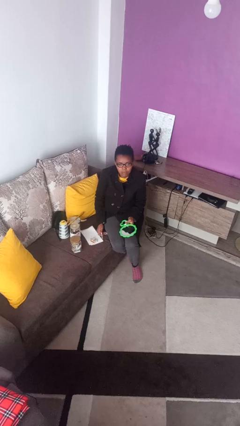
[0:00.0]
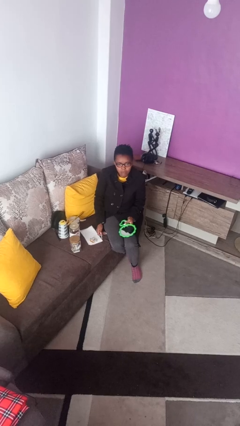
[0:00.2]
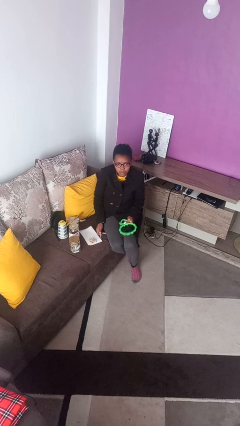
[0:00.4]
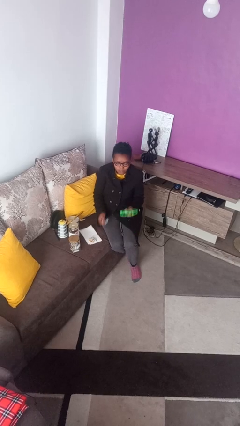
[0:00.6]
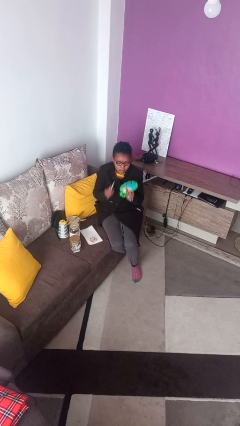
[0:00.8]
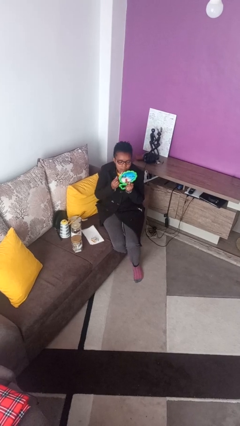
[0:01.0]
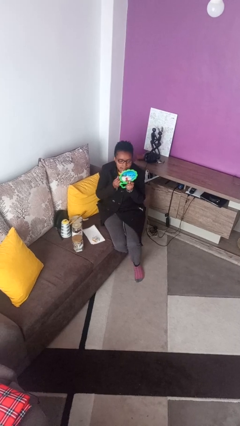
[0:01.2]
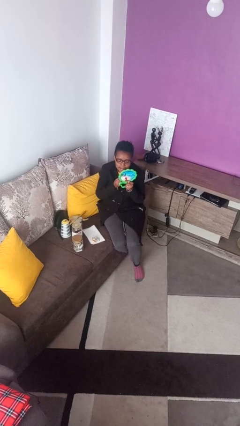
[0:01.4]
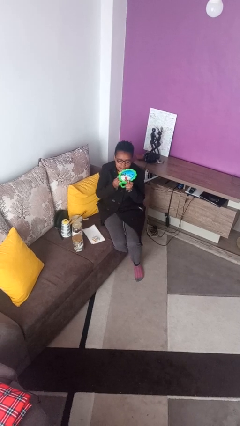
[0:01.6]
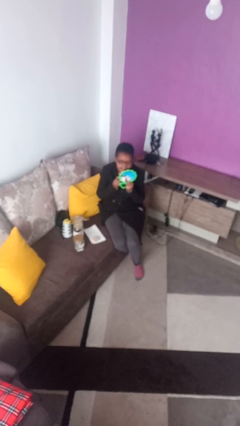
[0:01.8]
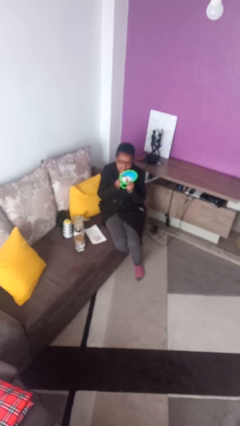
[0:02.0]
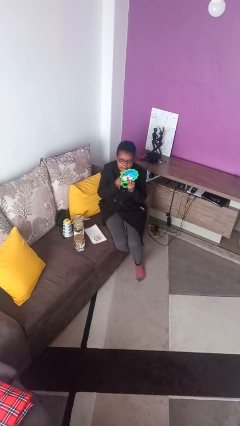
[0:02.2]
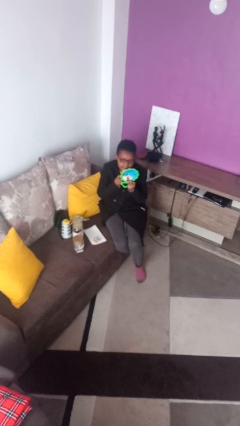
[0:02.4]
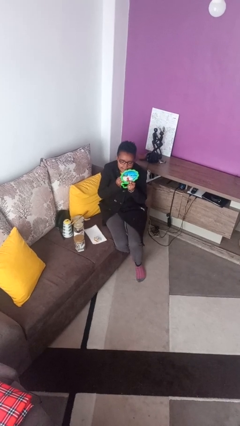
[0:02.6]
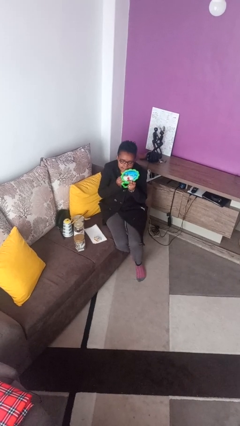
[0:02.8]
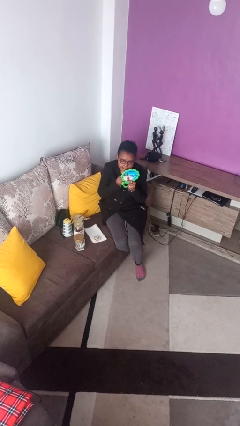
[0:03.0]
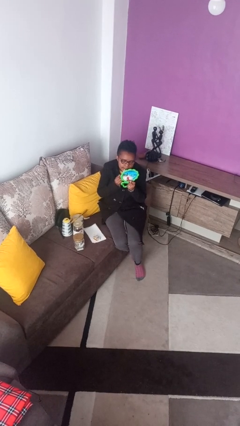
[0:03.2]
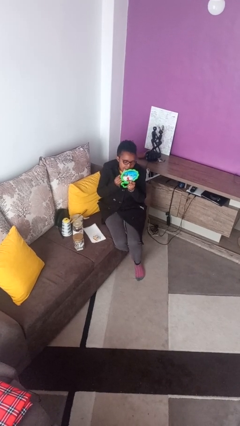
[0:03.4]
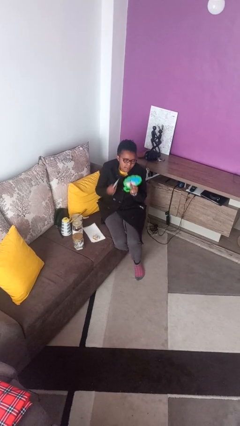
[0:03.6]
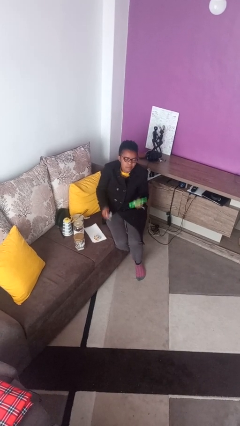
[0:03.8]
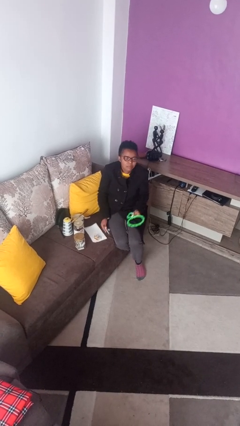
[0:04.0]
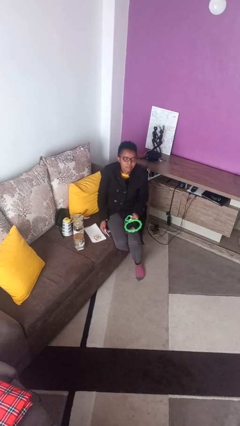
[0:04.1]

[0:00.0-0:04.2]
person applies lip makeup

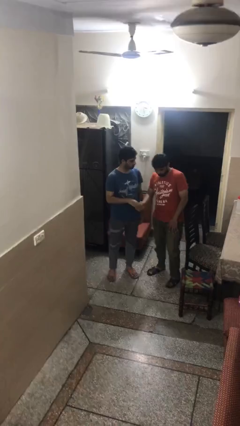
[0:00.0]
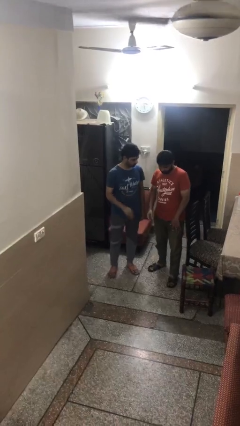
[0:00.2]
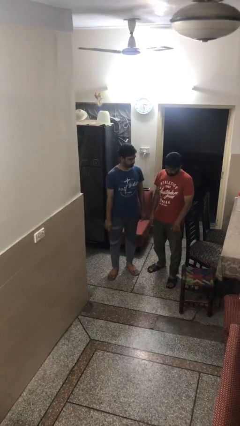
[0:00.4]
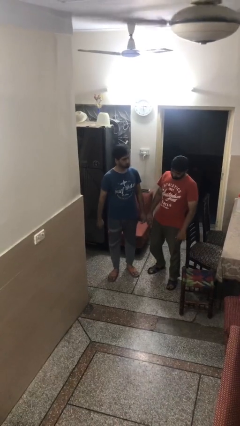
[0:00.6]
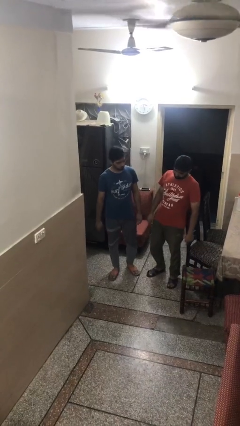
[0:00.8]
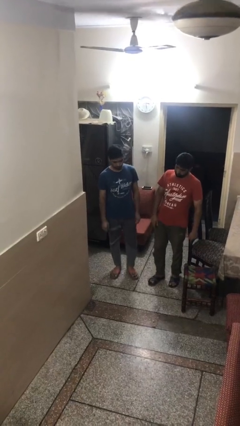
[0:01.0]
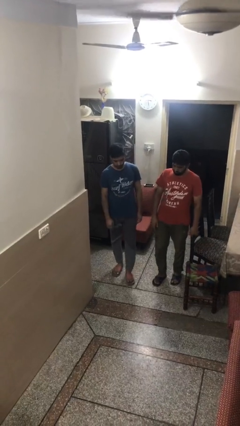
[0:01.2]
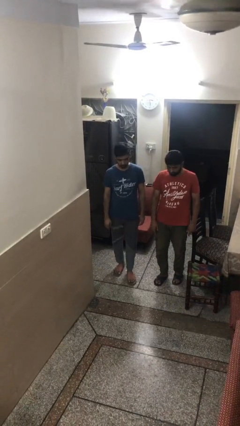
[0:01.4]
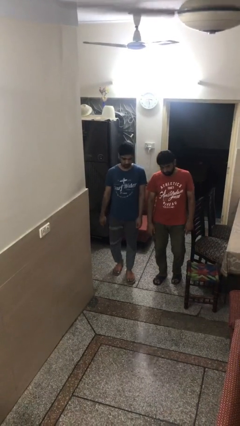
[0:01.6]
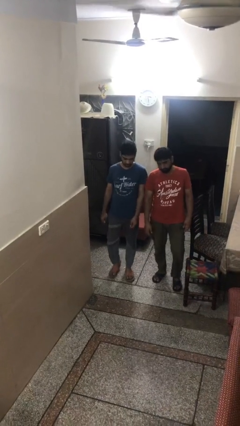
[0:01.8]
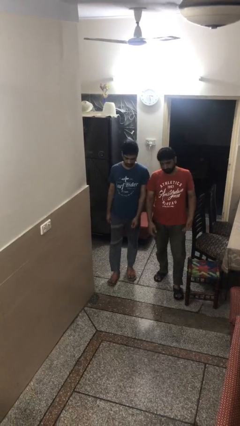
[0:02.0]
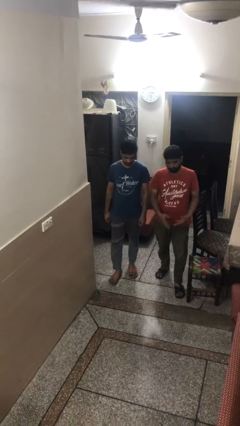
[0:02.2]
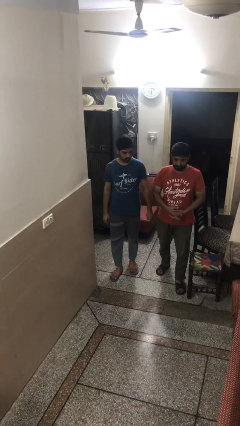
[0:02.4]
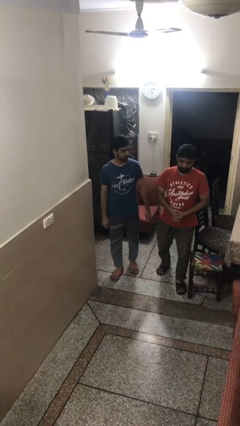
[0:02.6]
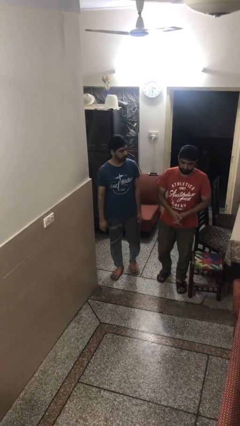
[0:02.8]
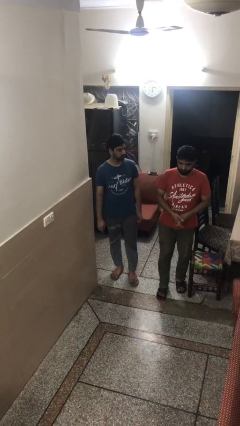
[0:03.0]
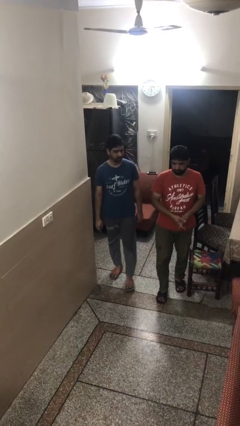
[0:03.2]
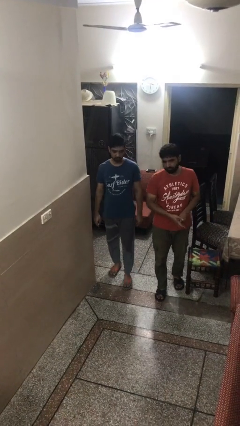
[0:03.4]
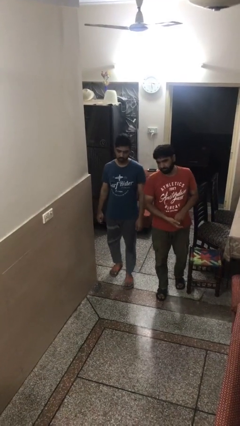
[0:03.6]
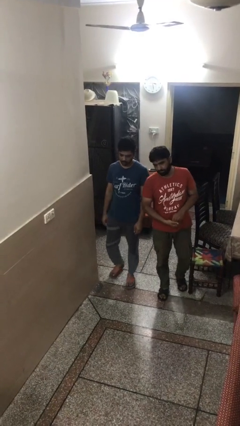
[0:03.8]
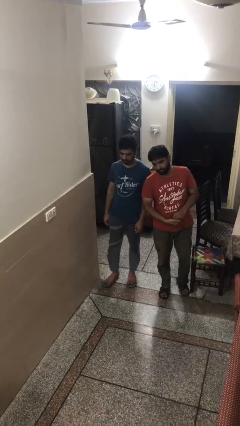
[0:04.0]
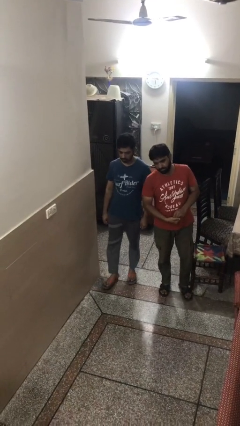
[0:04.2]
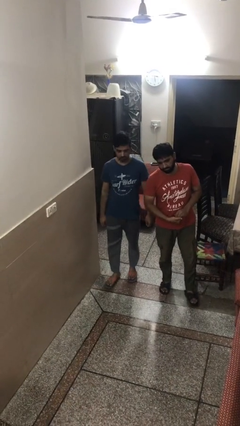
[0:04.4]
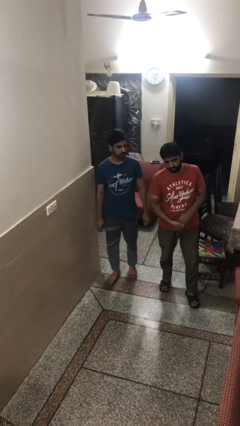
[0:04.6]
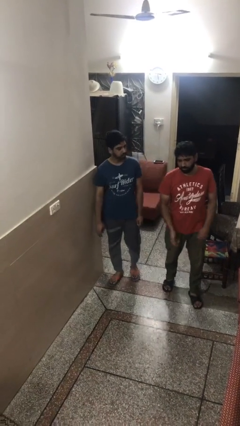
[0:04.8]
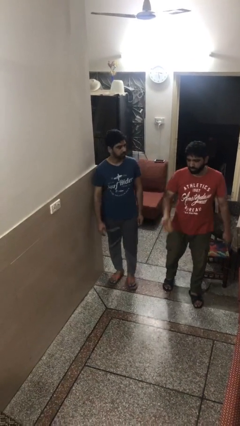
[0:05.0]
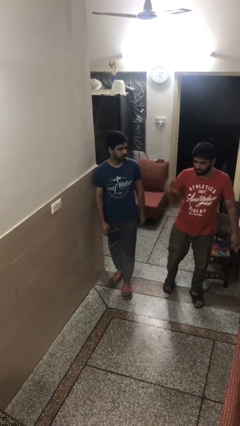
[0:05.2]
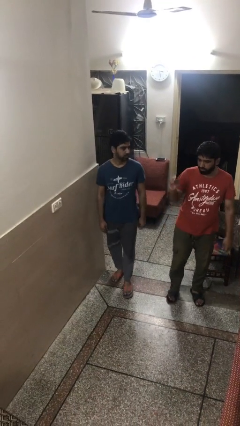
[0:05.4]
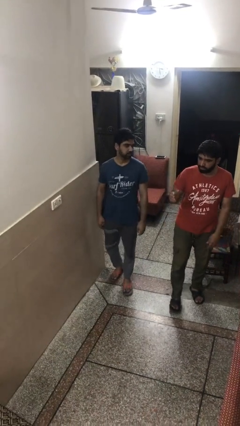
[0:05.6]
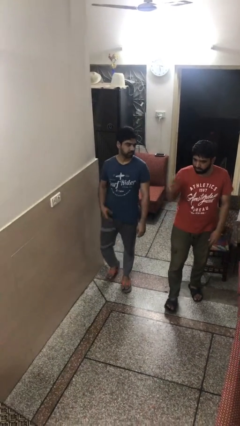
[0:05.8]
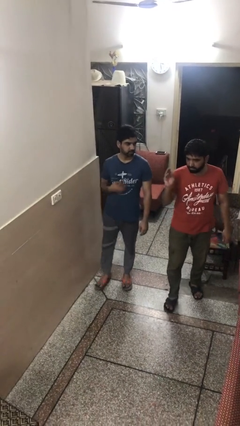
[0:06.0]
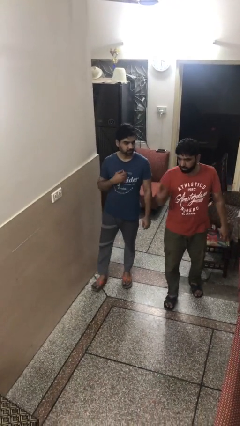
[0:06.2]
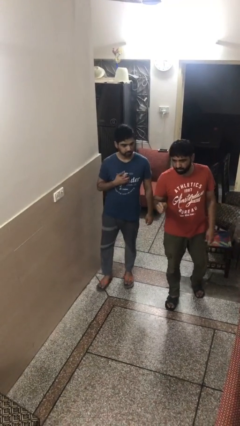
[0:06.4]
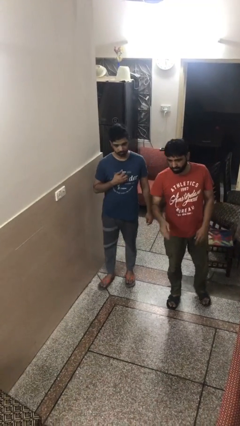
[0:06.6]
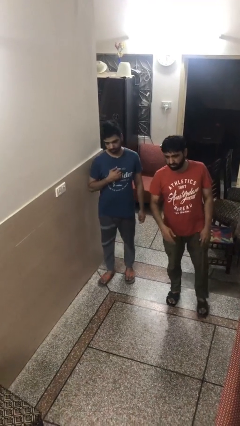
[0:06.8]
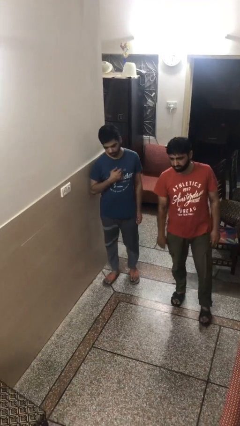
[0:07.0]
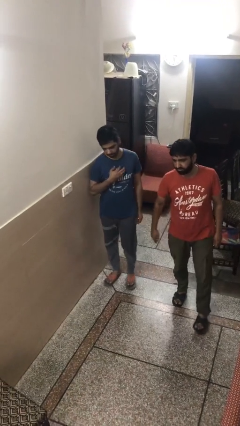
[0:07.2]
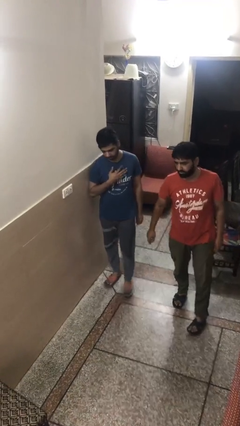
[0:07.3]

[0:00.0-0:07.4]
person talks to person

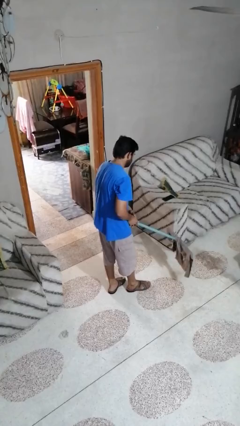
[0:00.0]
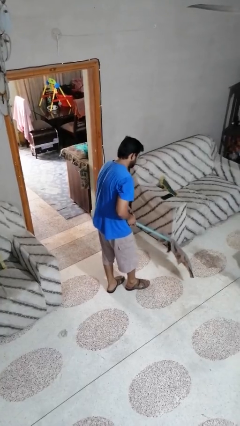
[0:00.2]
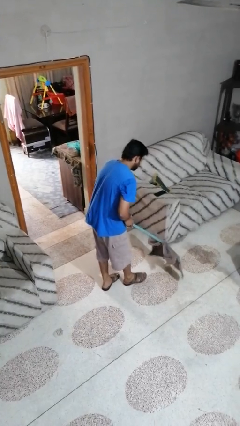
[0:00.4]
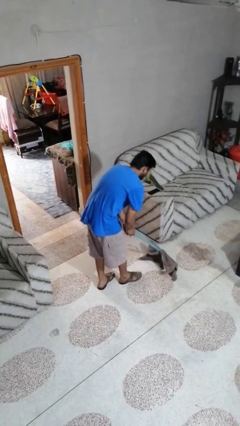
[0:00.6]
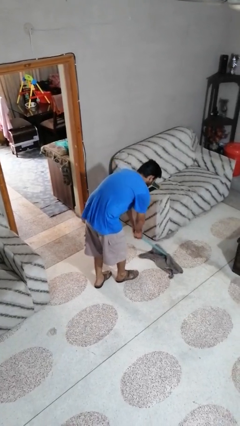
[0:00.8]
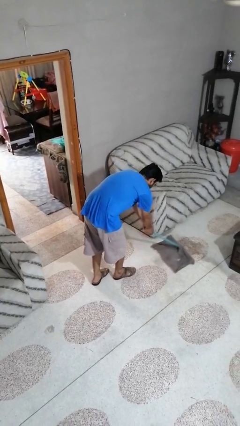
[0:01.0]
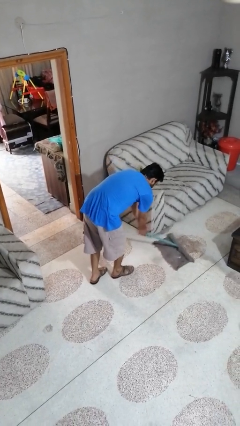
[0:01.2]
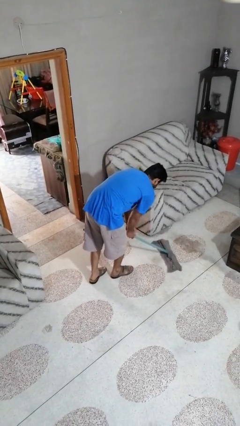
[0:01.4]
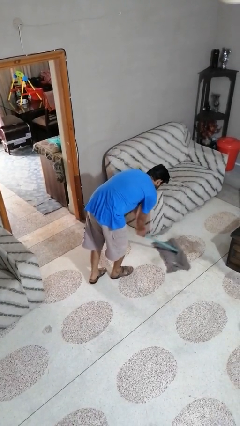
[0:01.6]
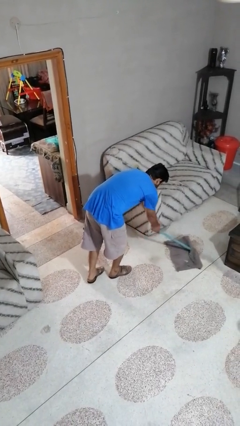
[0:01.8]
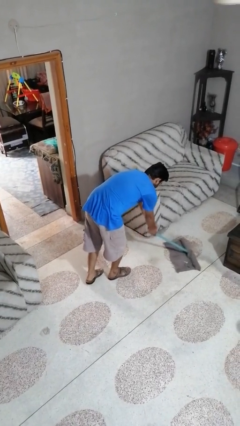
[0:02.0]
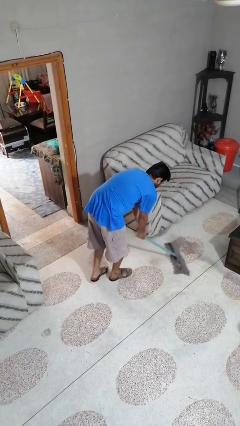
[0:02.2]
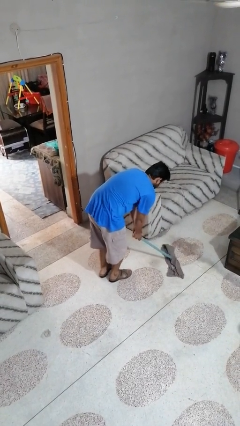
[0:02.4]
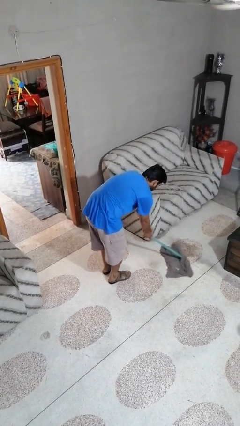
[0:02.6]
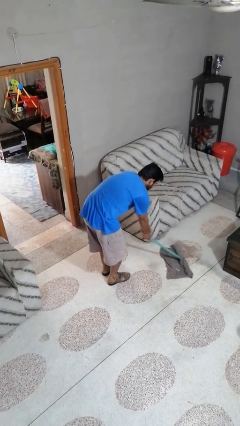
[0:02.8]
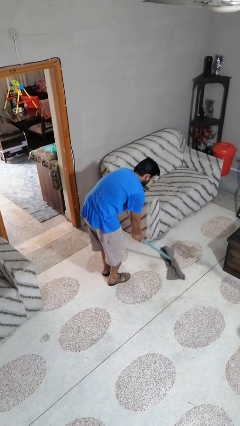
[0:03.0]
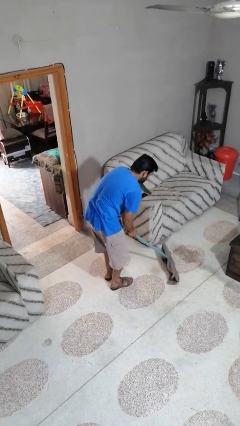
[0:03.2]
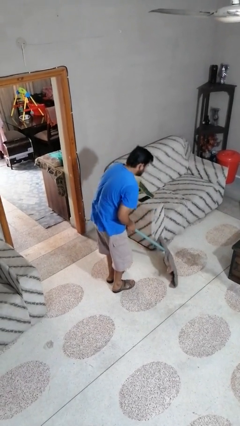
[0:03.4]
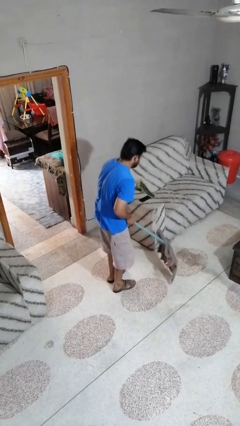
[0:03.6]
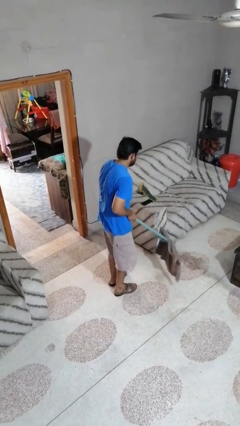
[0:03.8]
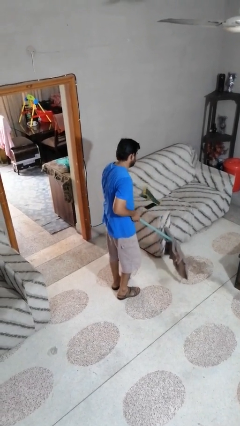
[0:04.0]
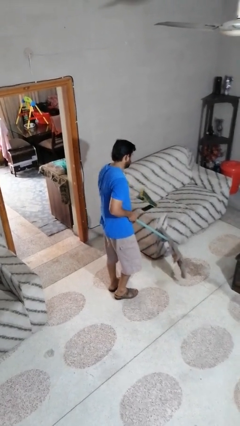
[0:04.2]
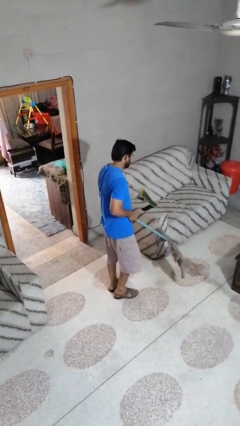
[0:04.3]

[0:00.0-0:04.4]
person mops

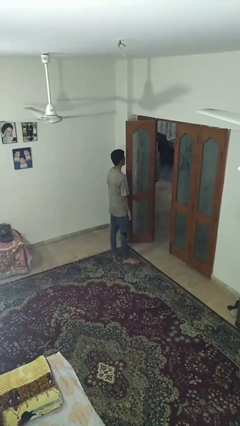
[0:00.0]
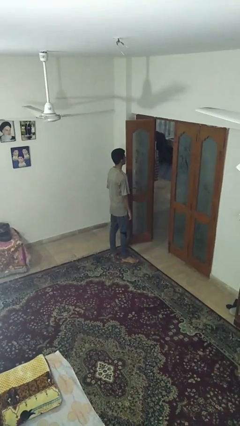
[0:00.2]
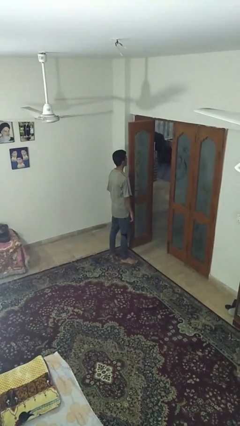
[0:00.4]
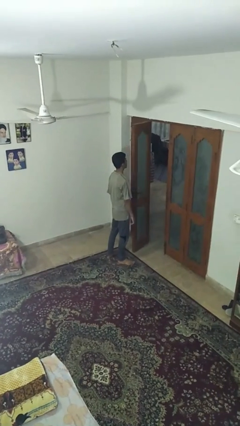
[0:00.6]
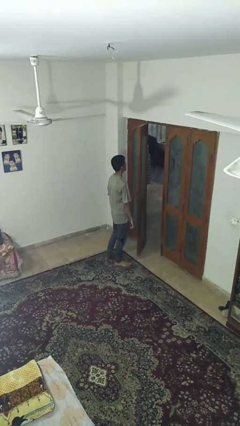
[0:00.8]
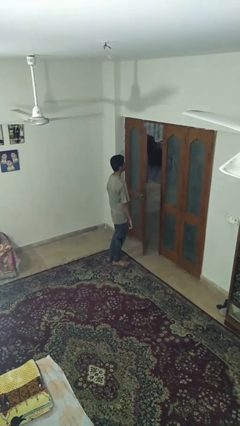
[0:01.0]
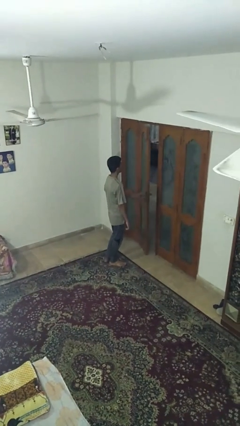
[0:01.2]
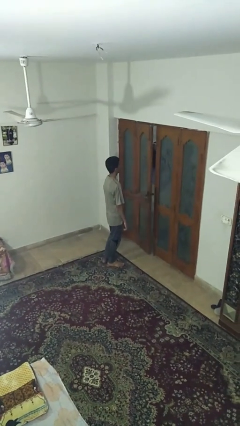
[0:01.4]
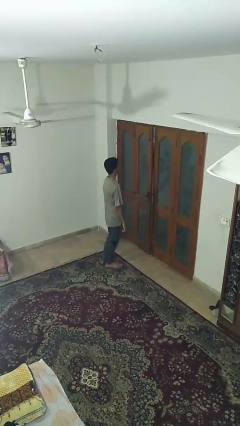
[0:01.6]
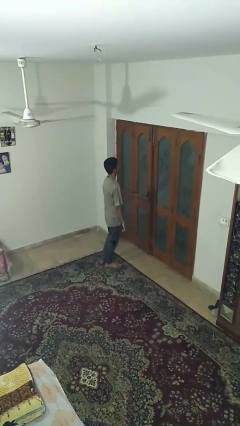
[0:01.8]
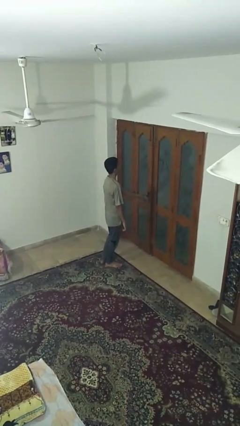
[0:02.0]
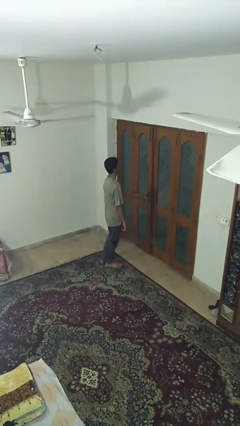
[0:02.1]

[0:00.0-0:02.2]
person closes facility door
